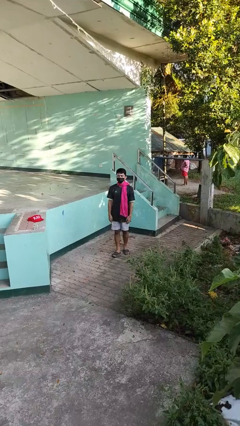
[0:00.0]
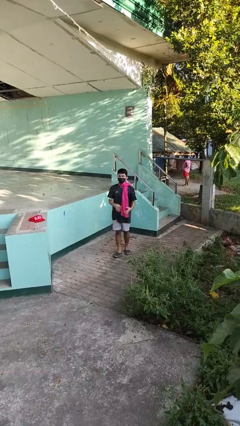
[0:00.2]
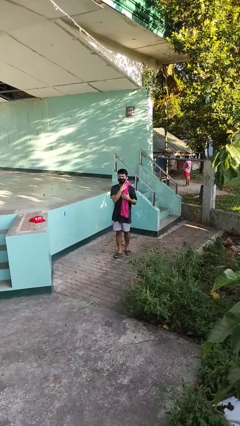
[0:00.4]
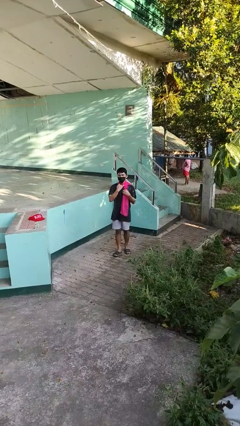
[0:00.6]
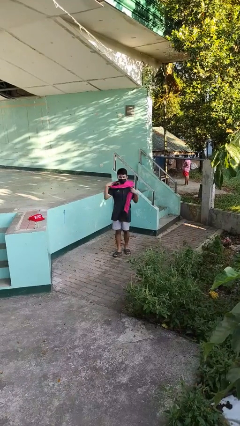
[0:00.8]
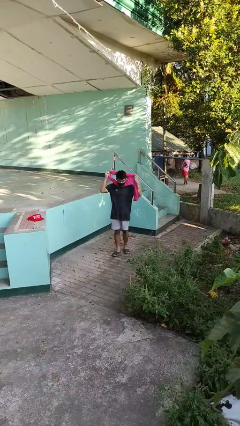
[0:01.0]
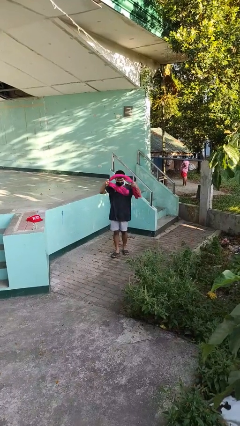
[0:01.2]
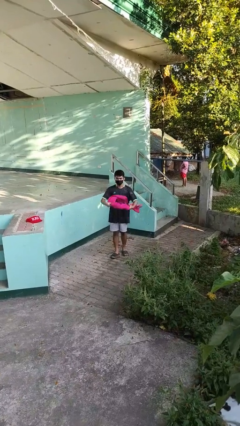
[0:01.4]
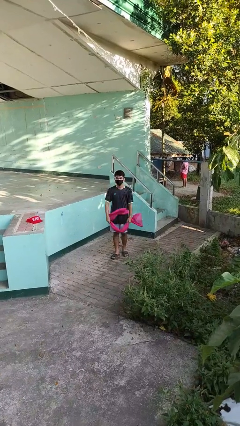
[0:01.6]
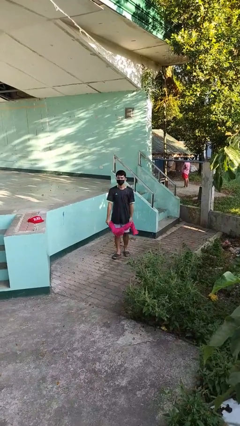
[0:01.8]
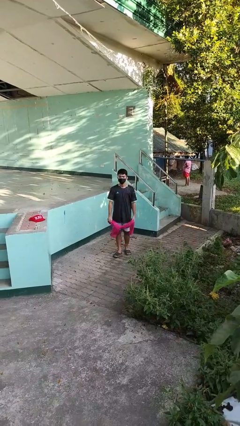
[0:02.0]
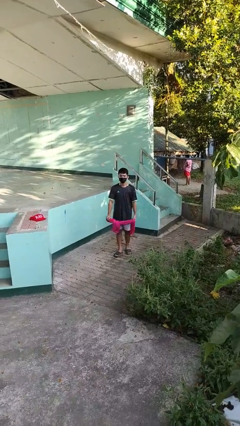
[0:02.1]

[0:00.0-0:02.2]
person takes off scarf

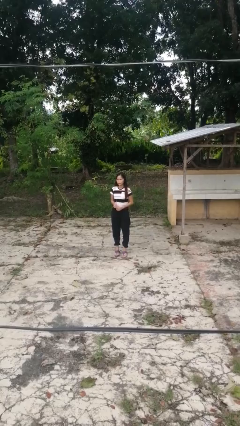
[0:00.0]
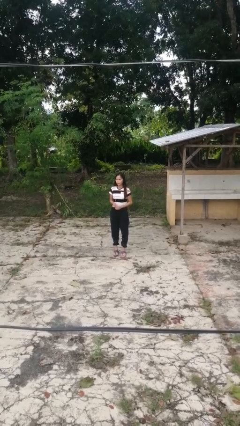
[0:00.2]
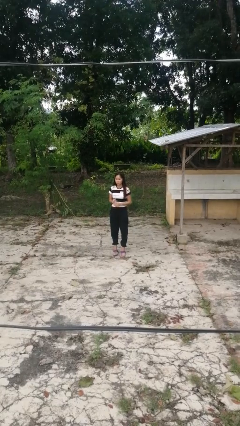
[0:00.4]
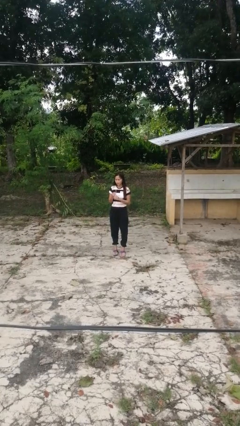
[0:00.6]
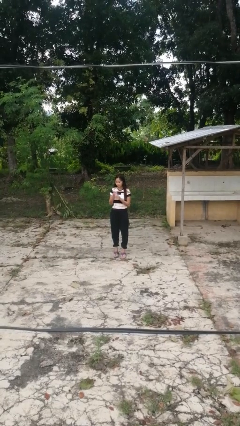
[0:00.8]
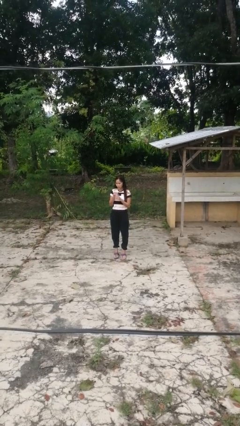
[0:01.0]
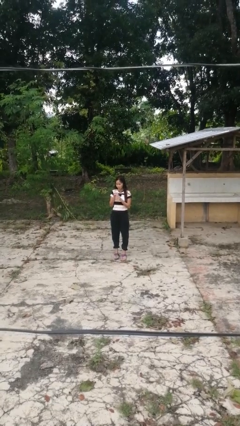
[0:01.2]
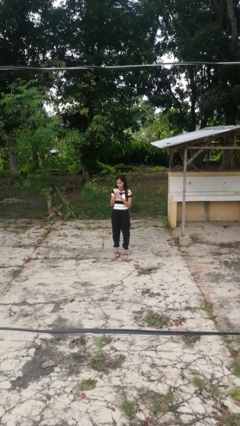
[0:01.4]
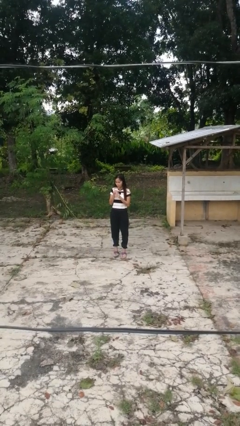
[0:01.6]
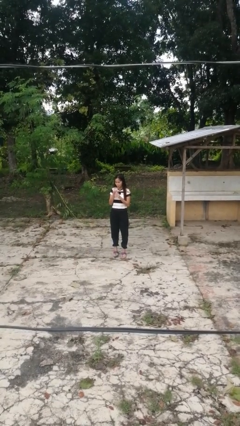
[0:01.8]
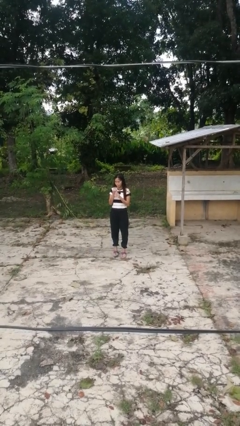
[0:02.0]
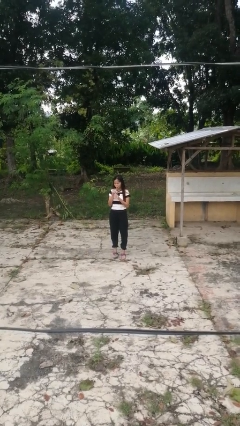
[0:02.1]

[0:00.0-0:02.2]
person drinks from straw

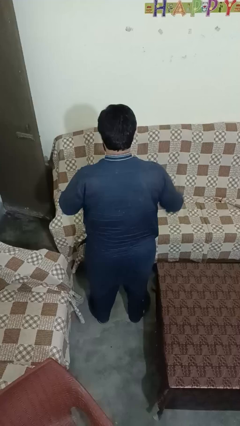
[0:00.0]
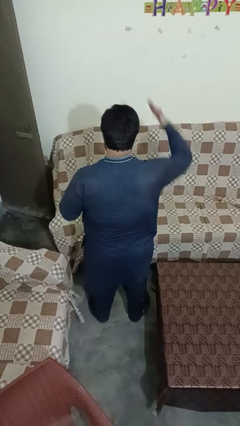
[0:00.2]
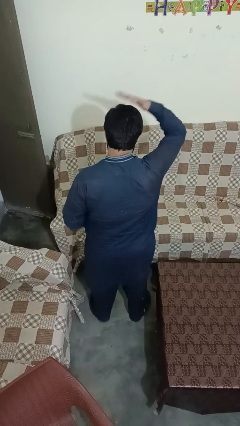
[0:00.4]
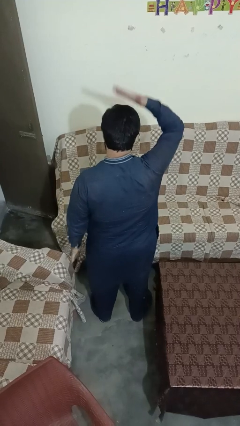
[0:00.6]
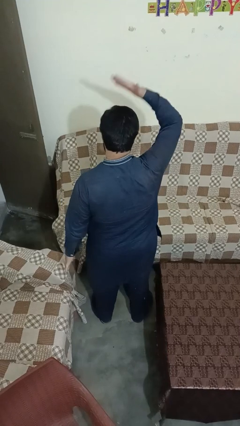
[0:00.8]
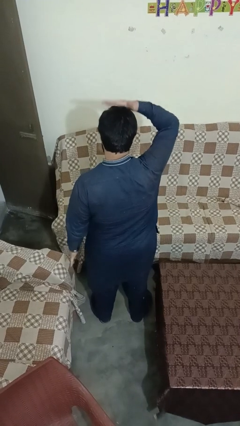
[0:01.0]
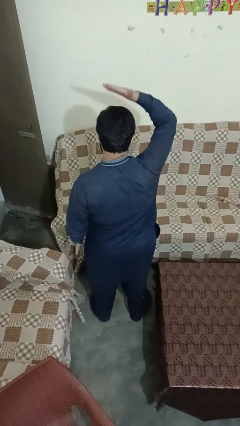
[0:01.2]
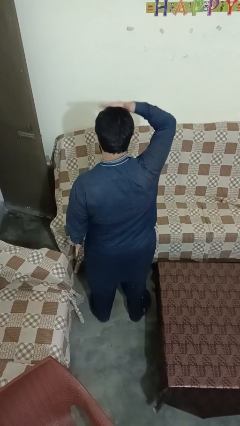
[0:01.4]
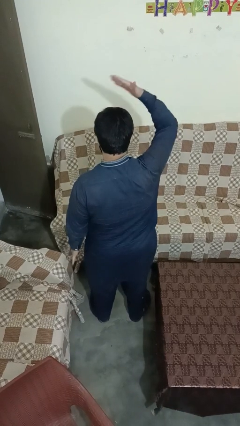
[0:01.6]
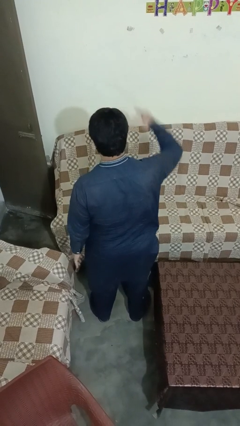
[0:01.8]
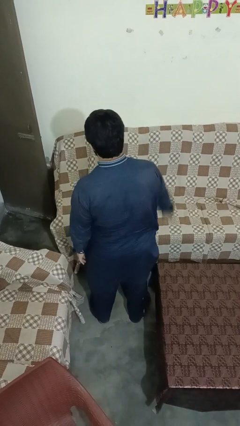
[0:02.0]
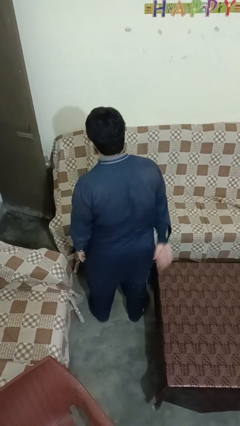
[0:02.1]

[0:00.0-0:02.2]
person pats head

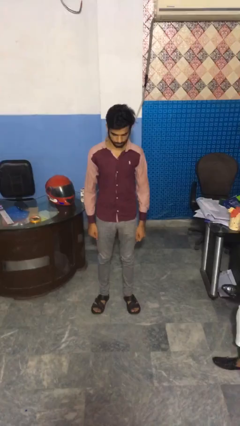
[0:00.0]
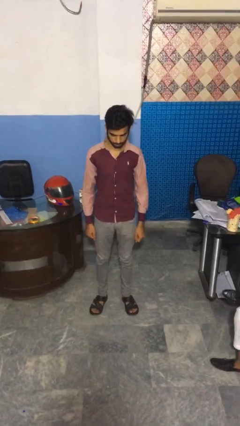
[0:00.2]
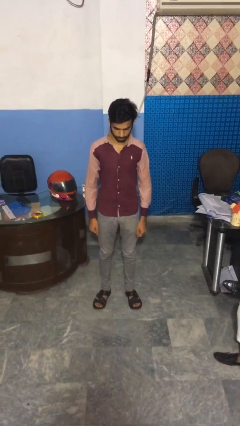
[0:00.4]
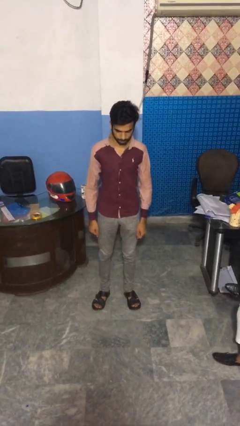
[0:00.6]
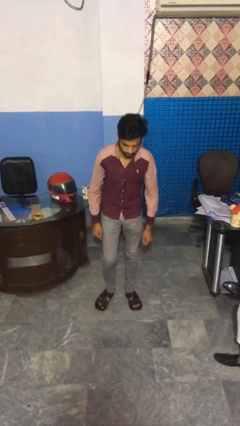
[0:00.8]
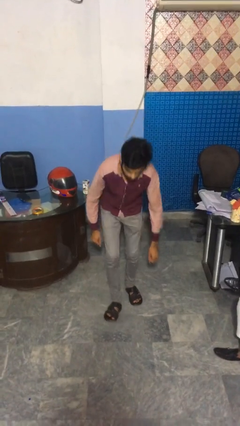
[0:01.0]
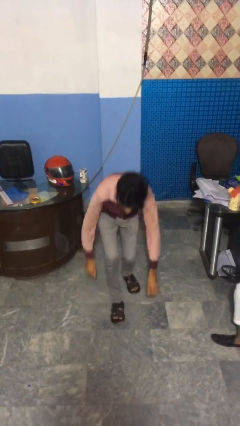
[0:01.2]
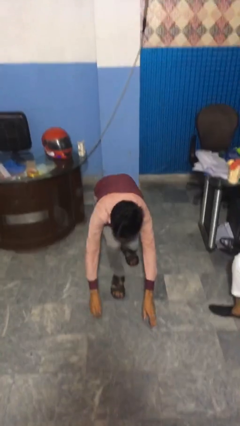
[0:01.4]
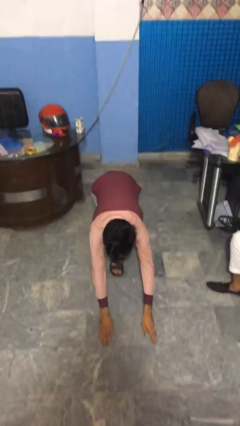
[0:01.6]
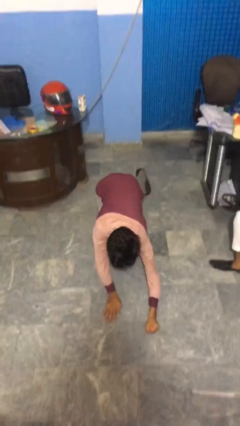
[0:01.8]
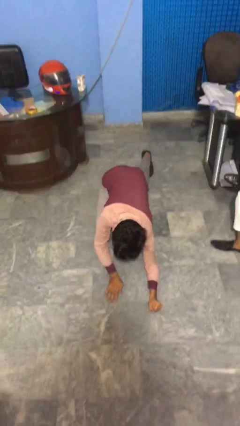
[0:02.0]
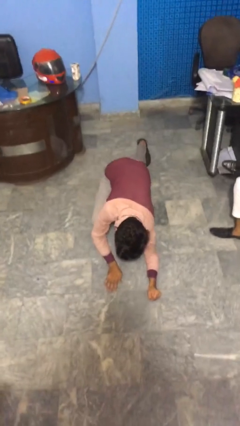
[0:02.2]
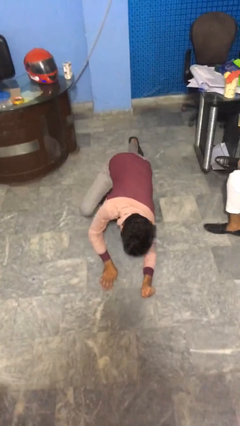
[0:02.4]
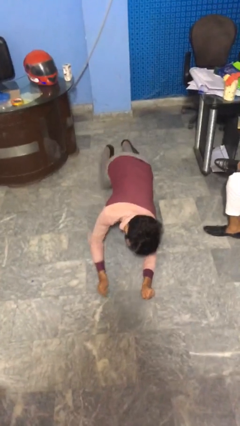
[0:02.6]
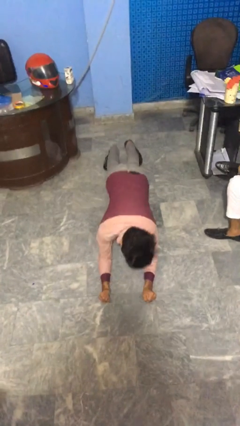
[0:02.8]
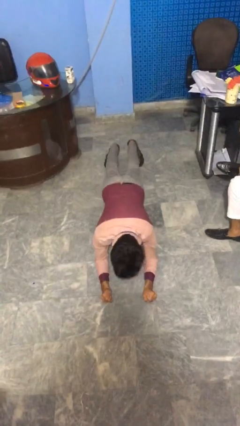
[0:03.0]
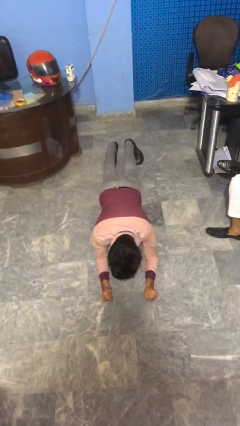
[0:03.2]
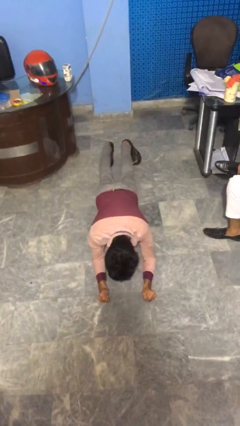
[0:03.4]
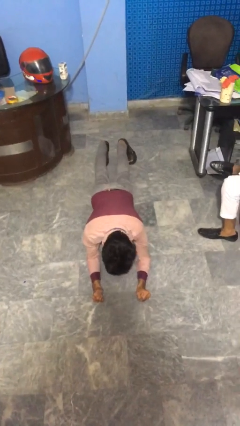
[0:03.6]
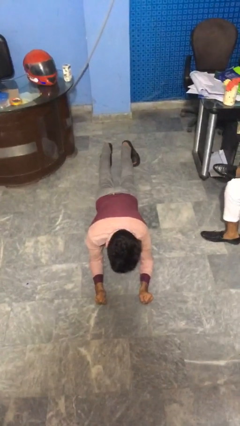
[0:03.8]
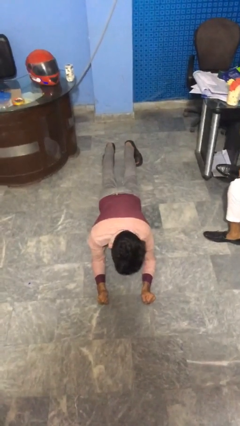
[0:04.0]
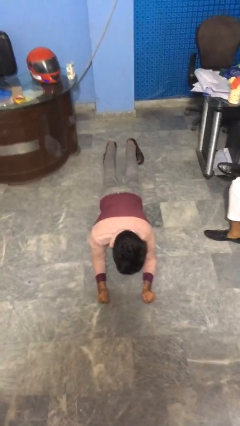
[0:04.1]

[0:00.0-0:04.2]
person exercises with plank

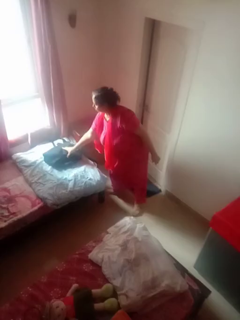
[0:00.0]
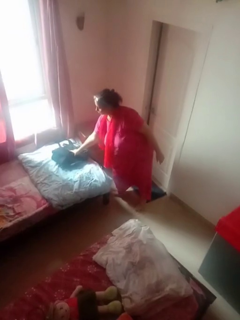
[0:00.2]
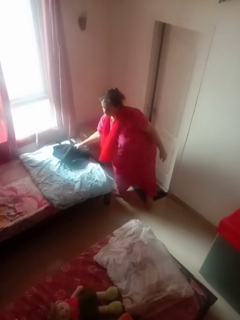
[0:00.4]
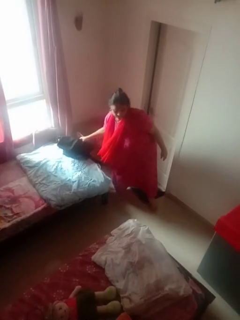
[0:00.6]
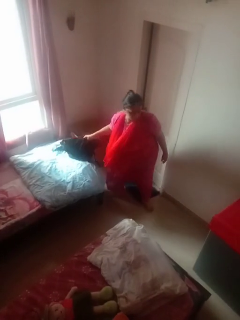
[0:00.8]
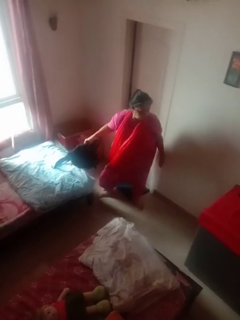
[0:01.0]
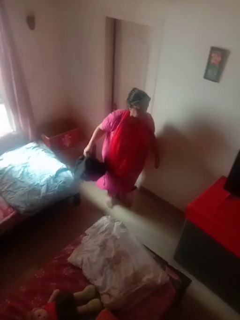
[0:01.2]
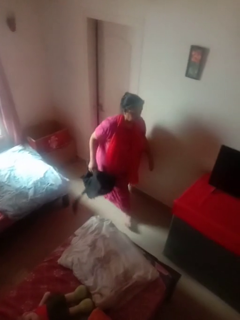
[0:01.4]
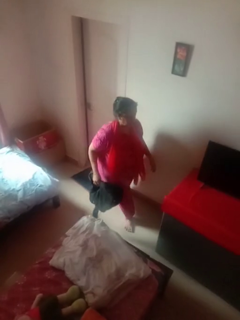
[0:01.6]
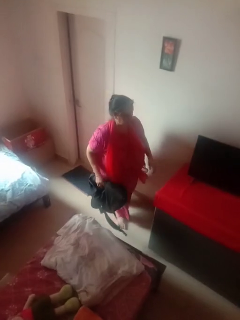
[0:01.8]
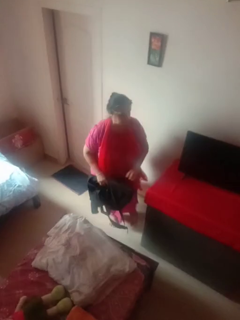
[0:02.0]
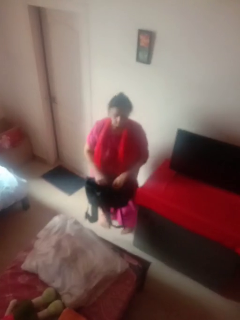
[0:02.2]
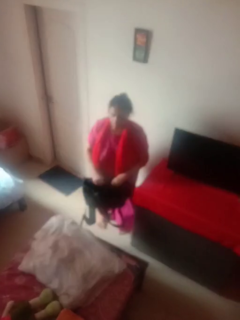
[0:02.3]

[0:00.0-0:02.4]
person picks up object from bed

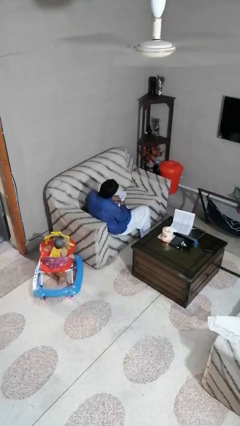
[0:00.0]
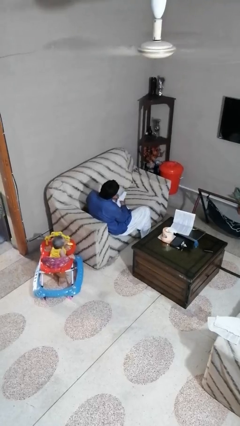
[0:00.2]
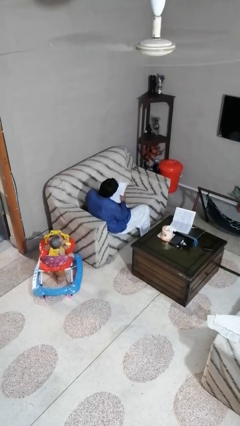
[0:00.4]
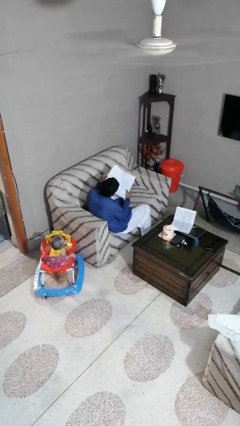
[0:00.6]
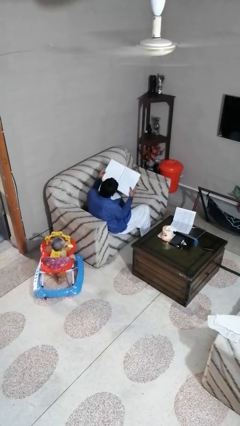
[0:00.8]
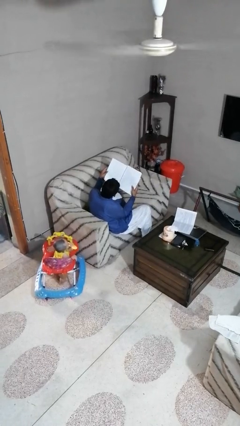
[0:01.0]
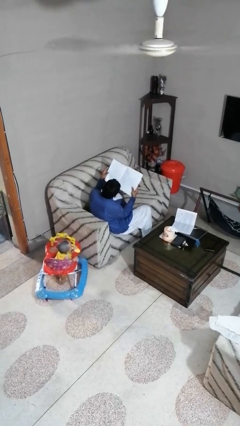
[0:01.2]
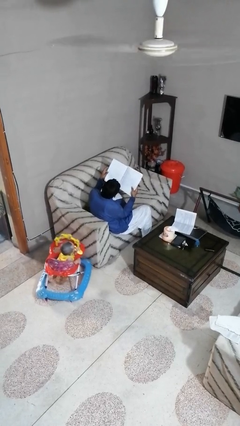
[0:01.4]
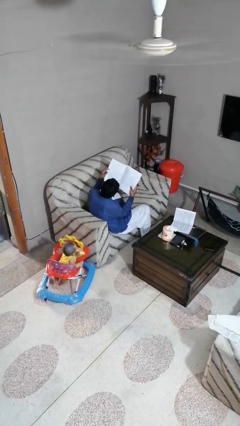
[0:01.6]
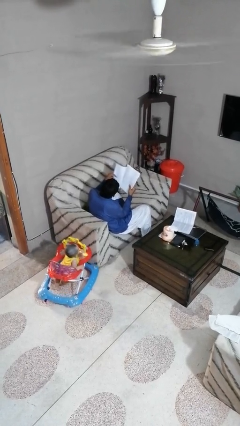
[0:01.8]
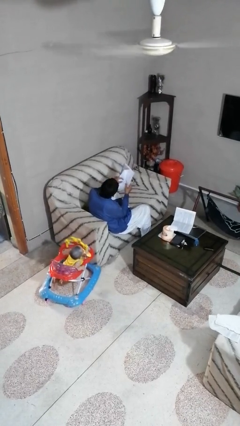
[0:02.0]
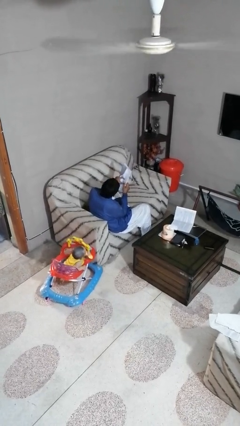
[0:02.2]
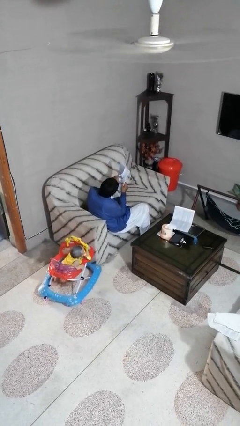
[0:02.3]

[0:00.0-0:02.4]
person reads magazine

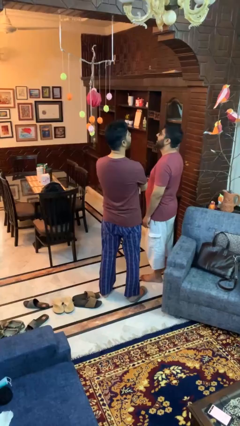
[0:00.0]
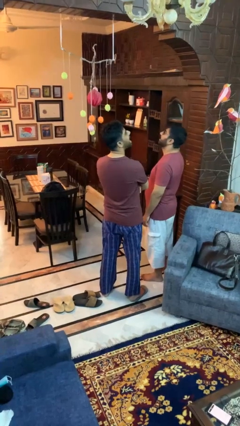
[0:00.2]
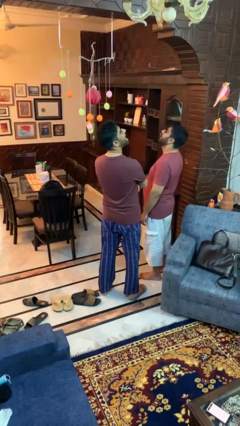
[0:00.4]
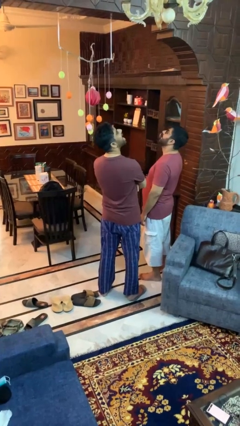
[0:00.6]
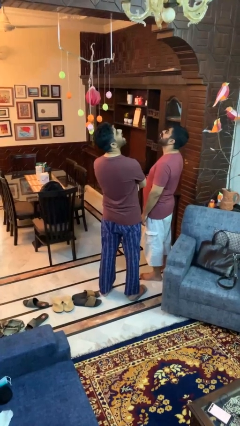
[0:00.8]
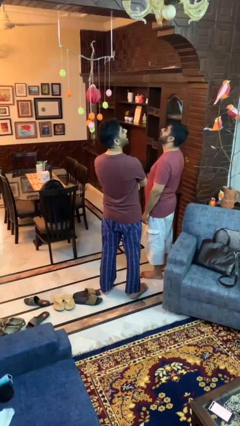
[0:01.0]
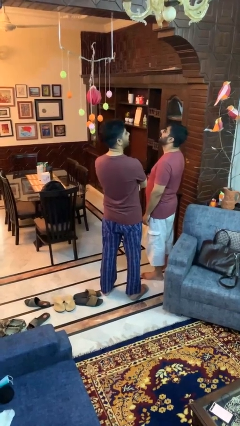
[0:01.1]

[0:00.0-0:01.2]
person laughs with person

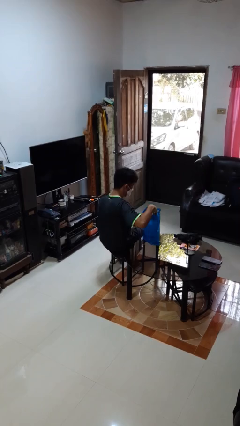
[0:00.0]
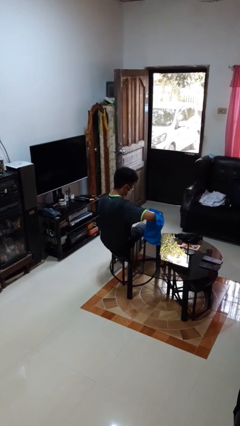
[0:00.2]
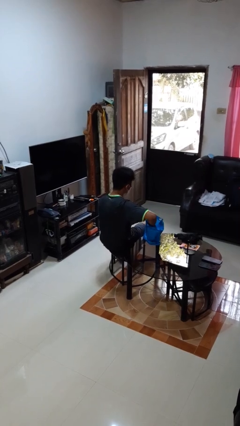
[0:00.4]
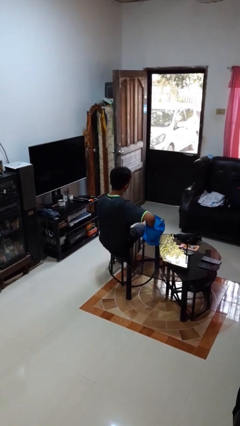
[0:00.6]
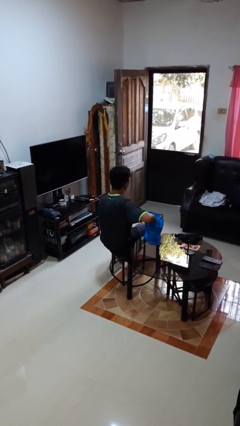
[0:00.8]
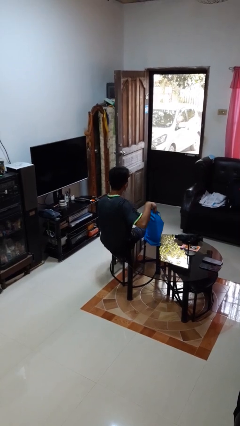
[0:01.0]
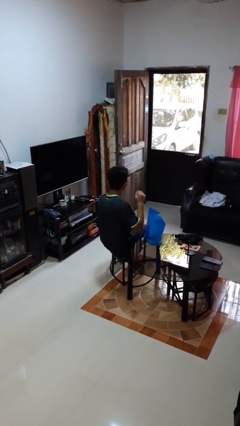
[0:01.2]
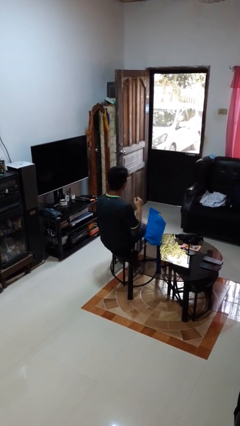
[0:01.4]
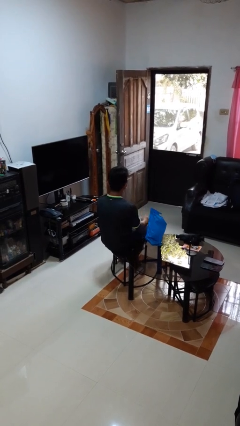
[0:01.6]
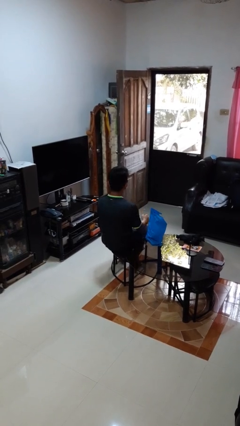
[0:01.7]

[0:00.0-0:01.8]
person puts object into bag